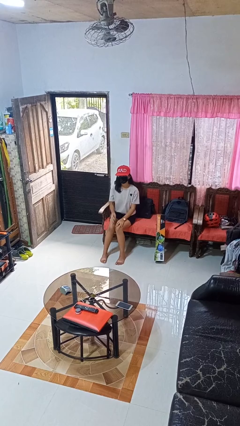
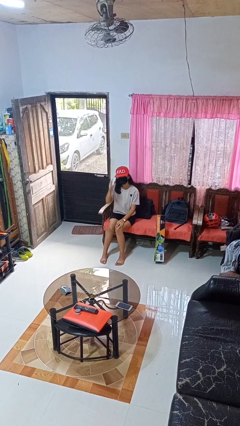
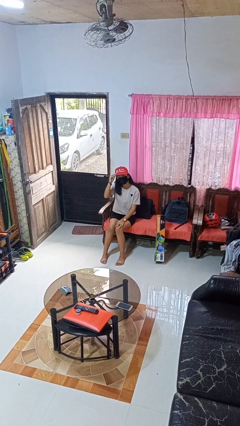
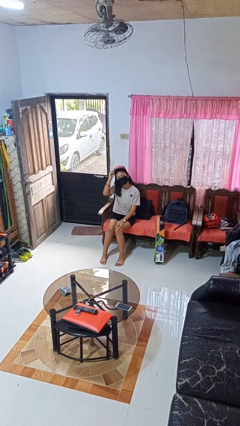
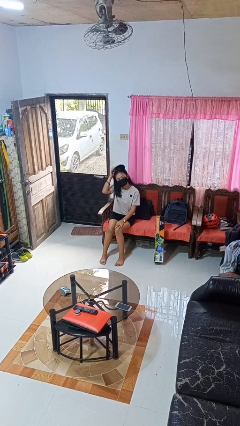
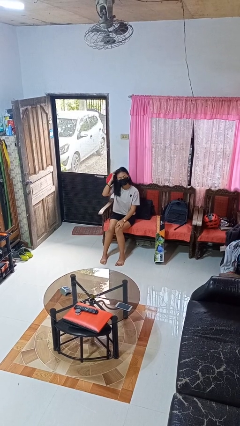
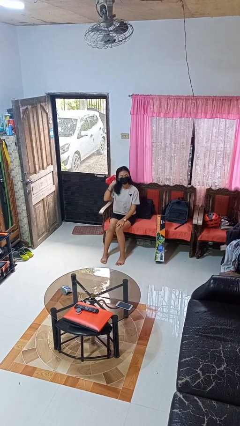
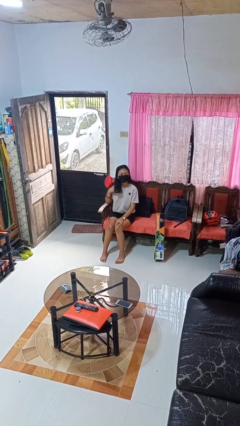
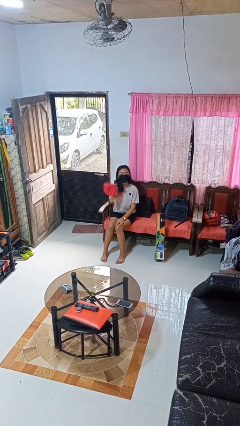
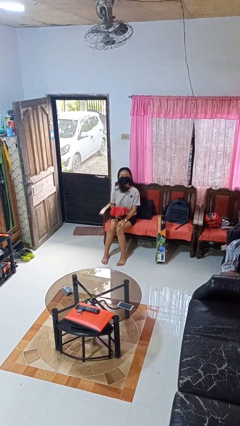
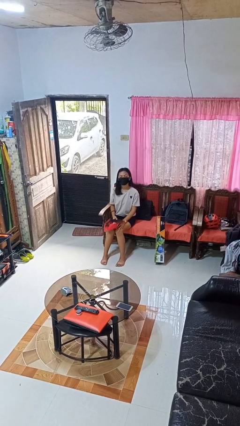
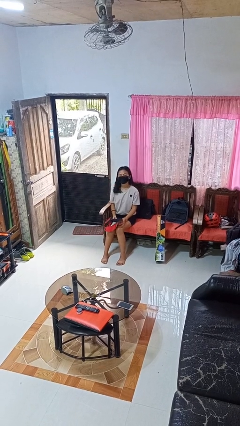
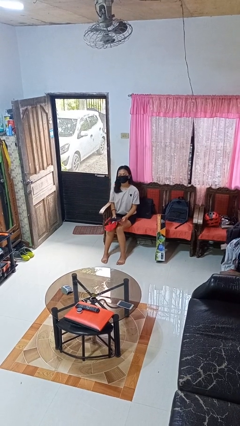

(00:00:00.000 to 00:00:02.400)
person takes off hat

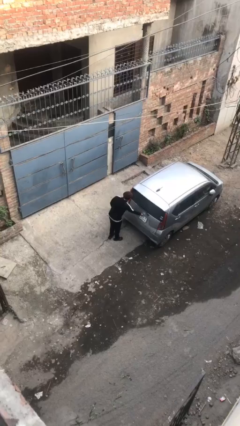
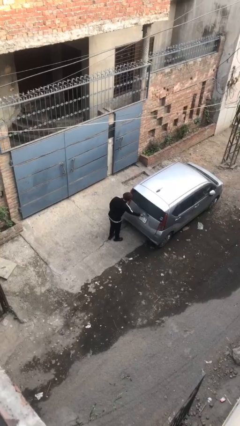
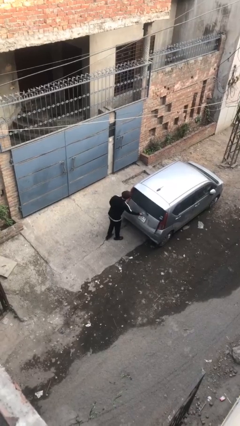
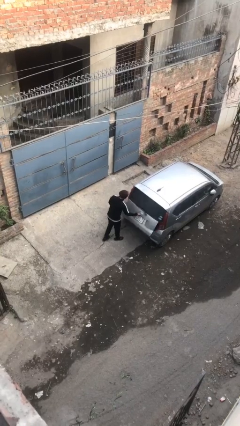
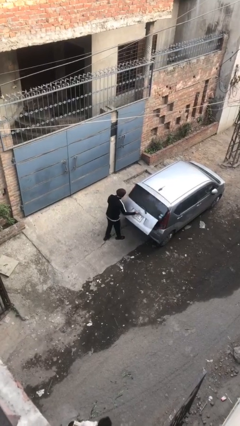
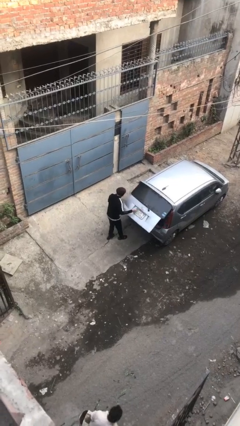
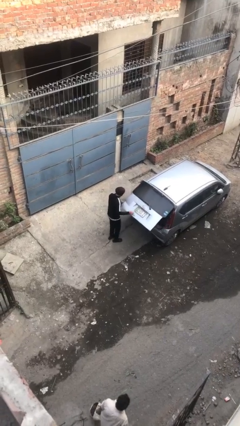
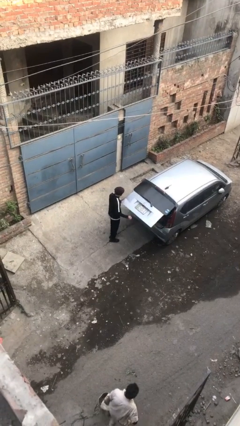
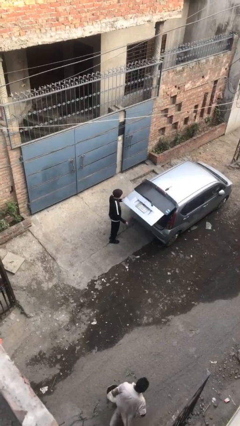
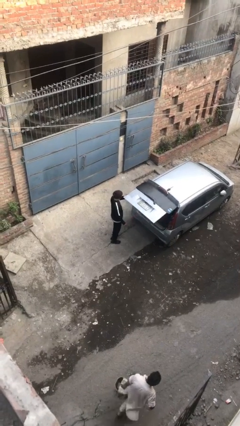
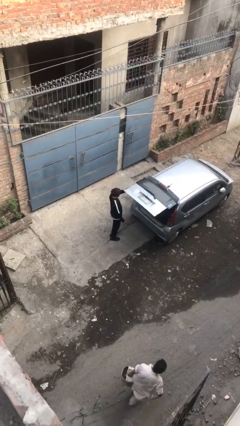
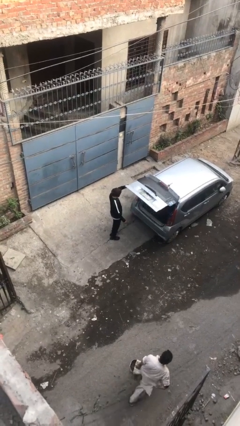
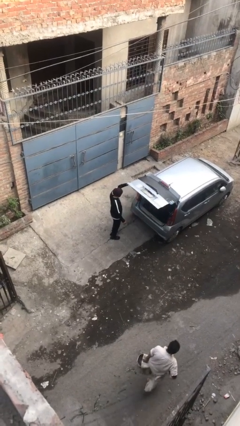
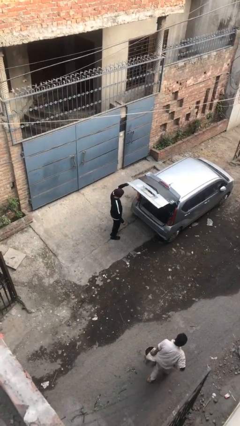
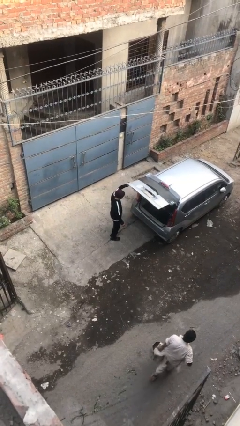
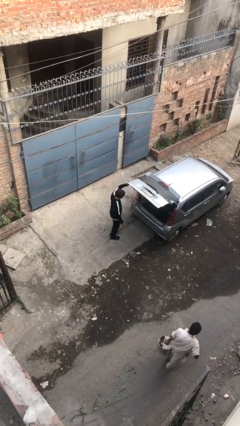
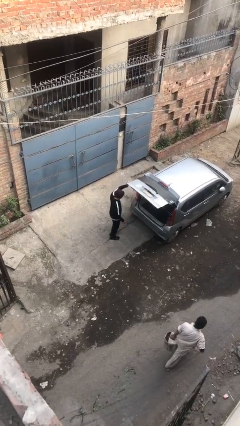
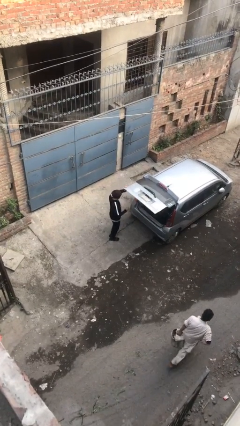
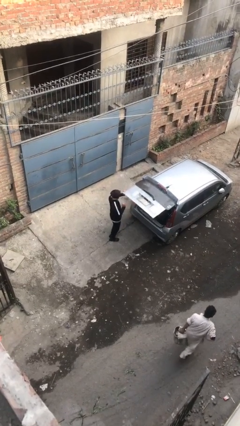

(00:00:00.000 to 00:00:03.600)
person opens car trunk

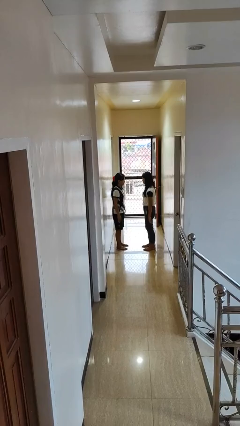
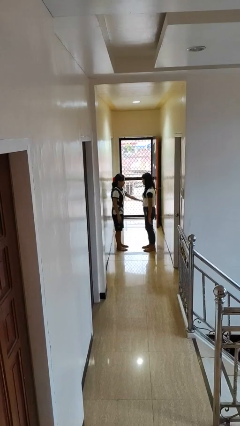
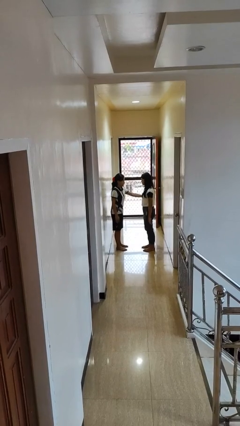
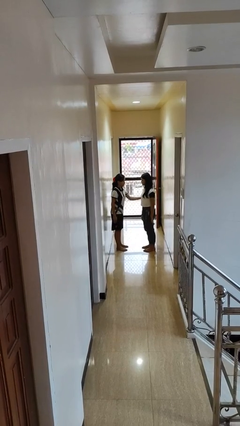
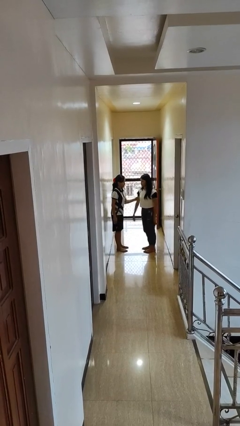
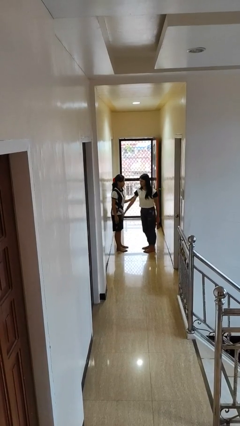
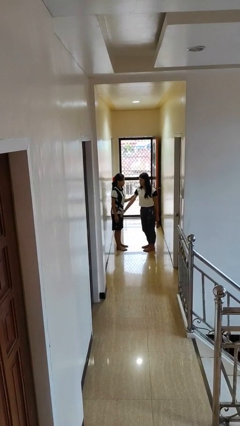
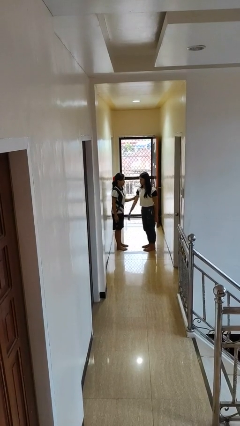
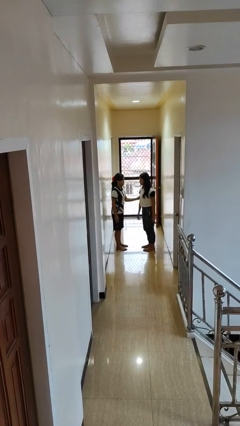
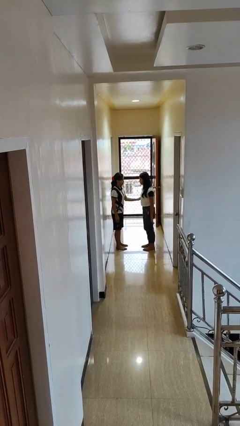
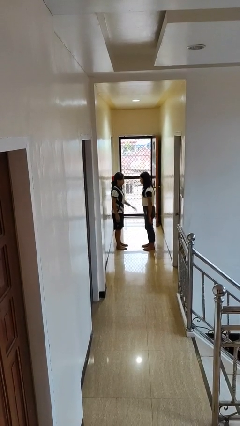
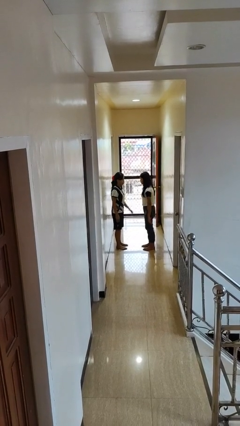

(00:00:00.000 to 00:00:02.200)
person grabs person by bicep

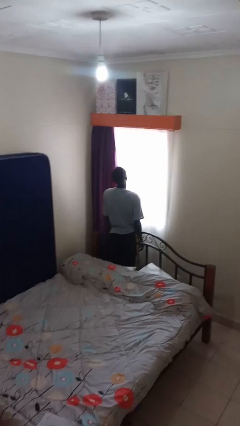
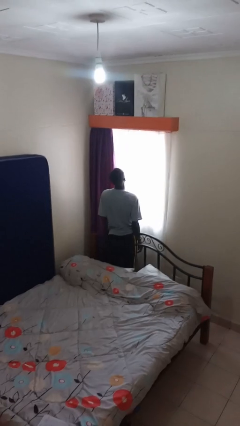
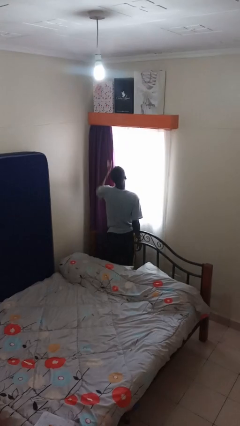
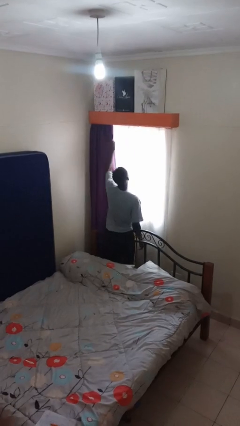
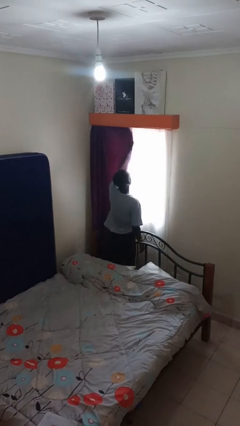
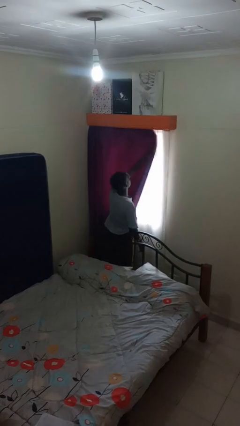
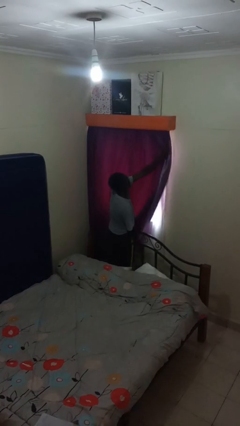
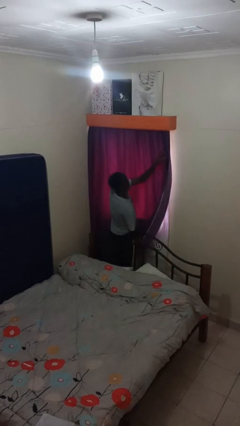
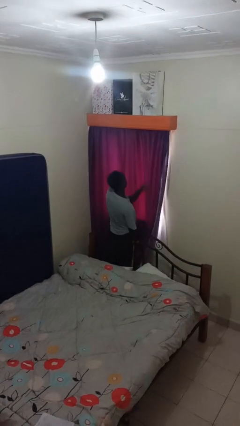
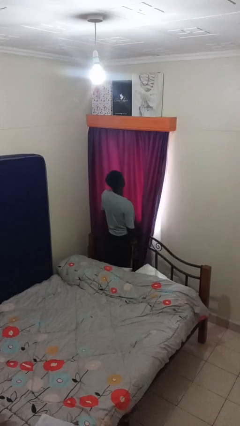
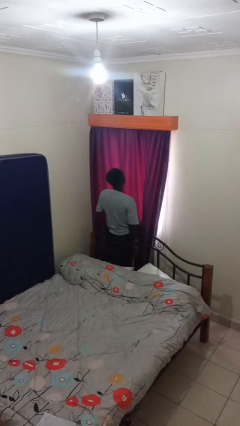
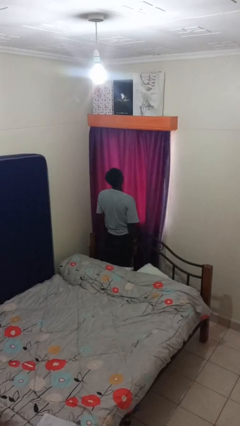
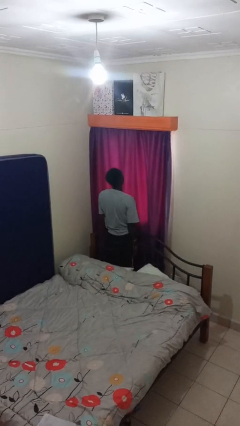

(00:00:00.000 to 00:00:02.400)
person closes curtains

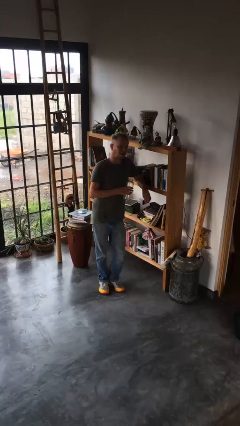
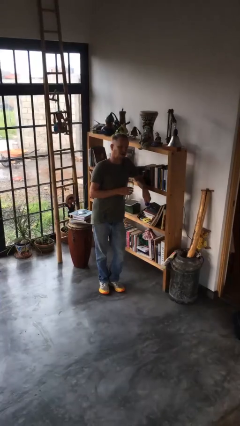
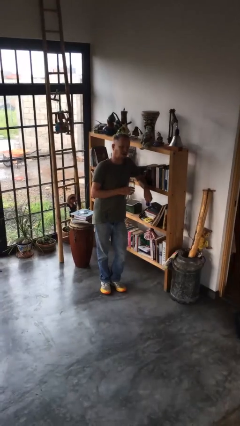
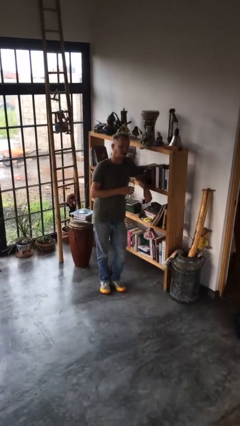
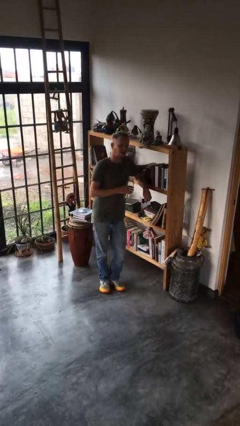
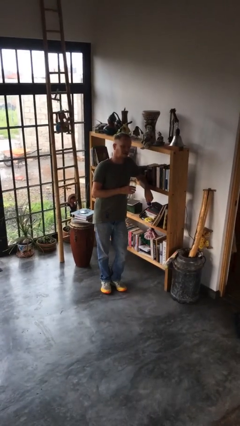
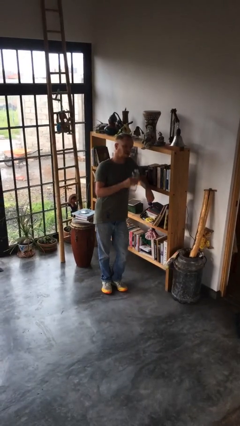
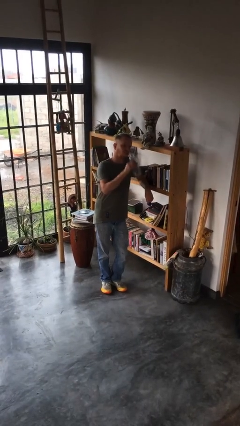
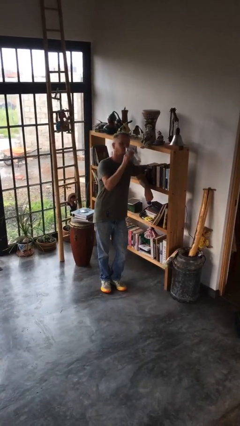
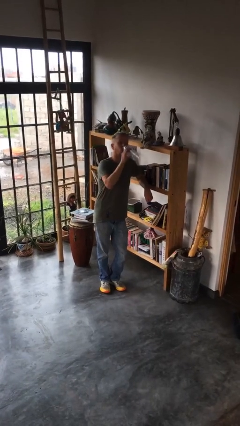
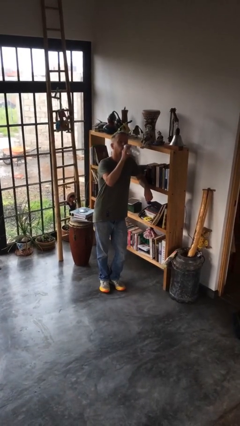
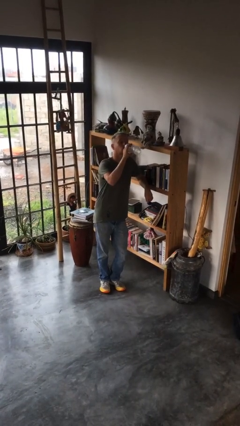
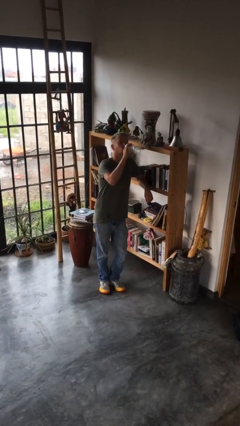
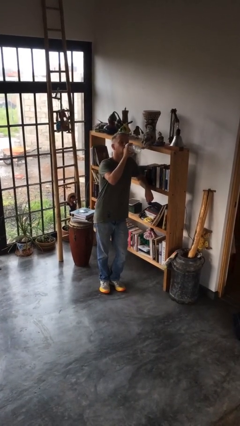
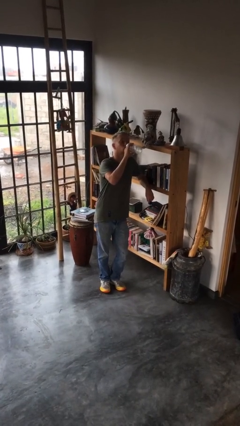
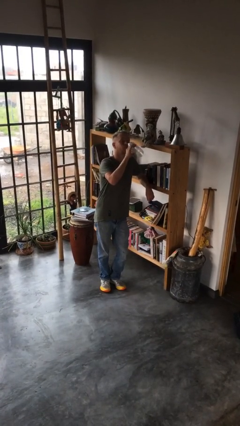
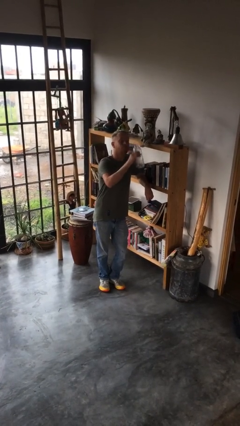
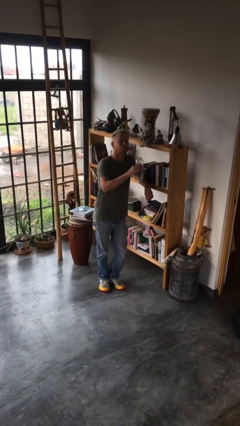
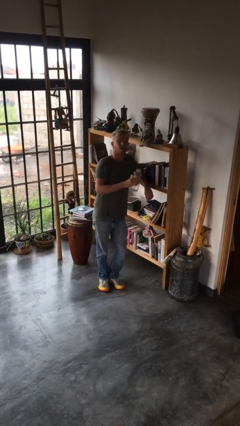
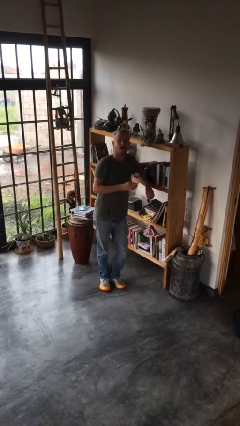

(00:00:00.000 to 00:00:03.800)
person drinks from bottle

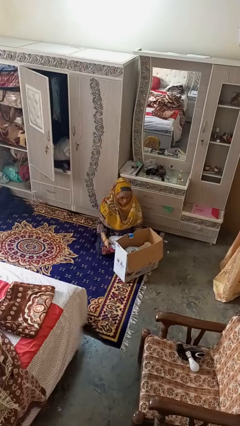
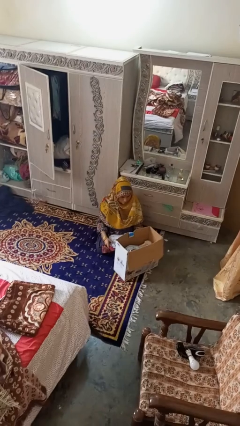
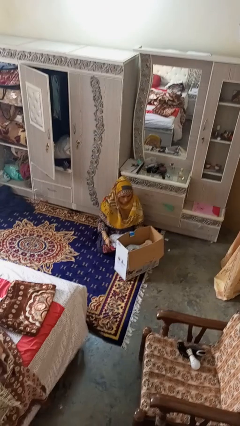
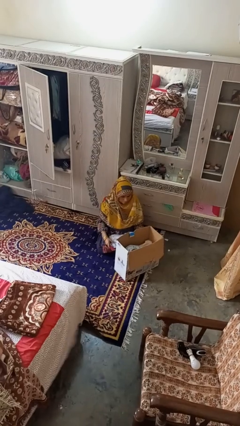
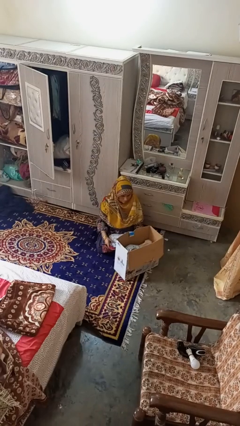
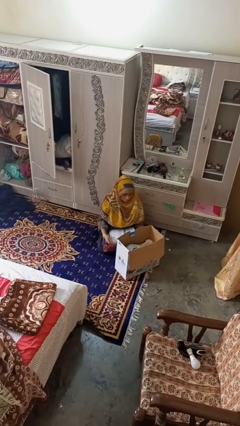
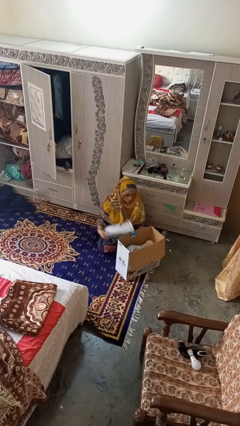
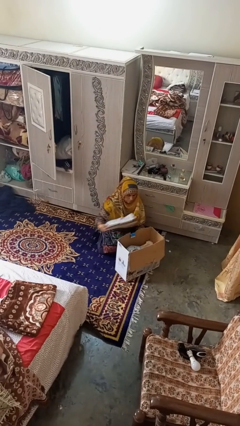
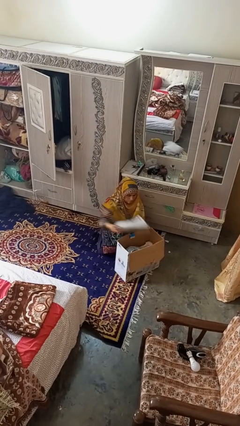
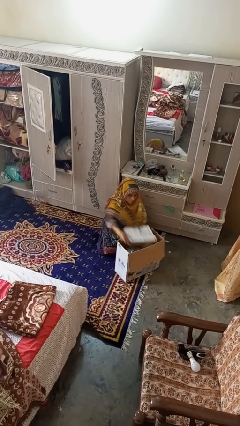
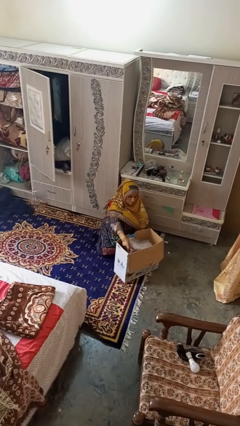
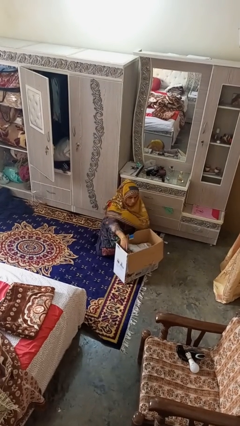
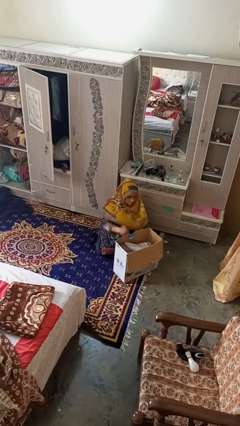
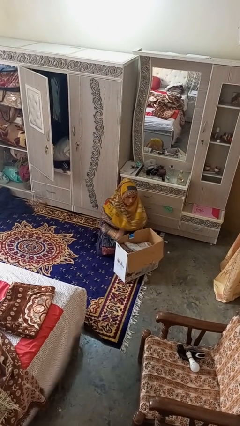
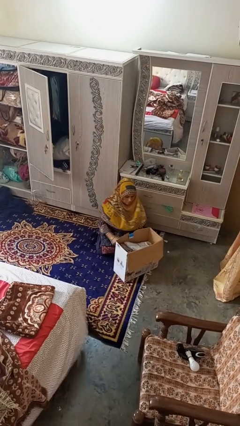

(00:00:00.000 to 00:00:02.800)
person puts object into box
